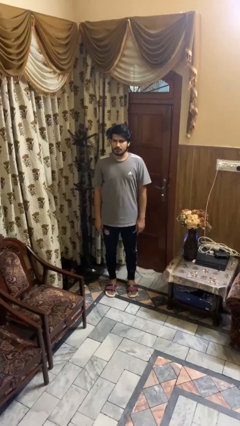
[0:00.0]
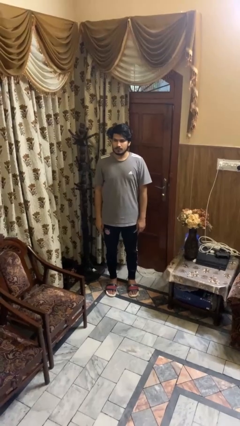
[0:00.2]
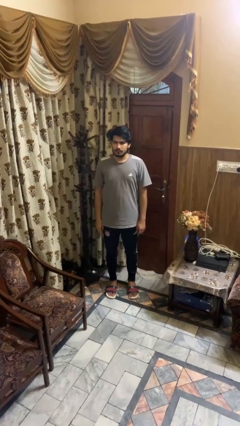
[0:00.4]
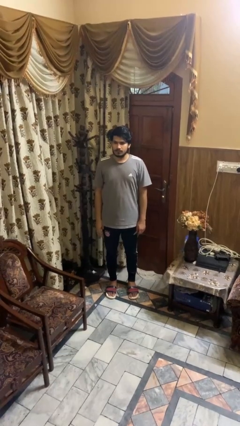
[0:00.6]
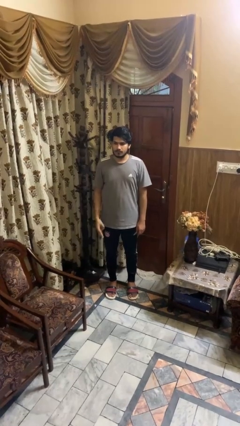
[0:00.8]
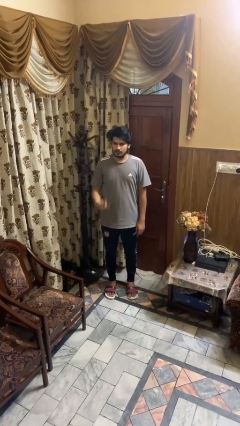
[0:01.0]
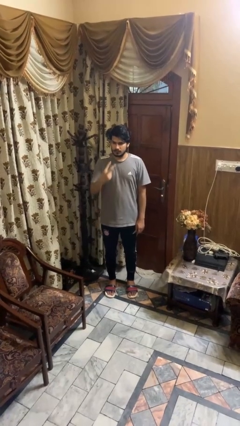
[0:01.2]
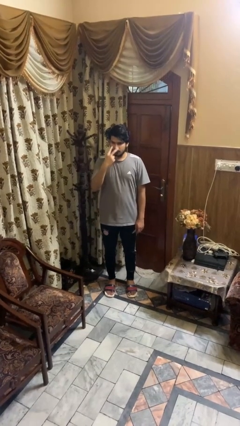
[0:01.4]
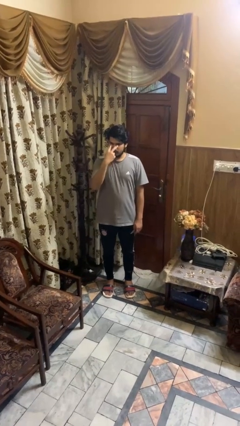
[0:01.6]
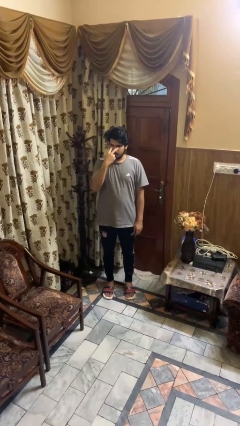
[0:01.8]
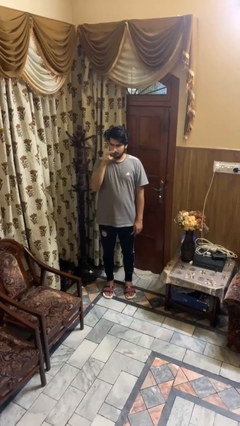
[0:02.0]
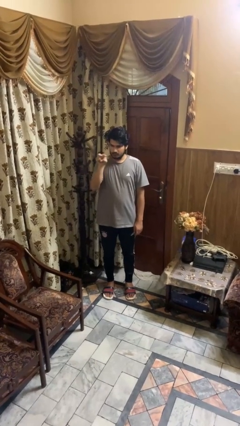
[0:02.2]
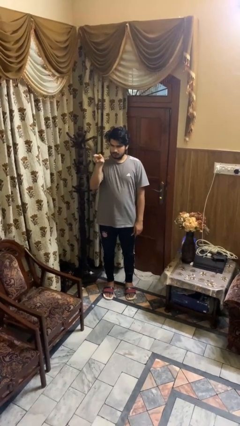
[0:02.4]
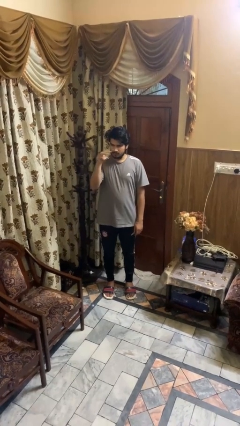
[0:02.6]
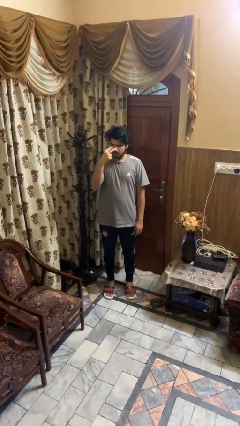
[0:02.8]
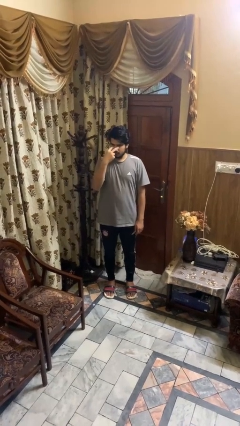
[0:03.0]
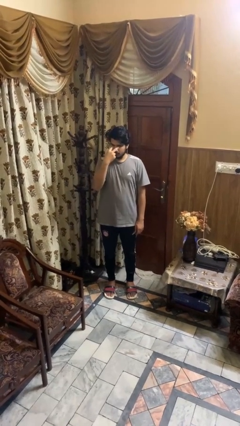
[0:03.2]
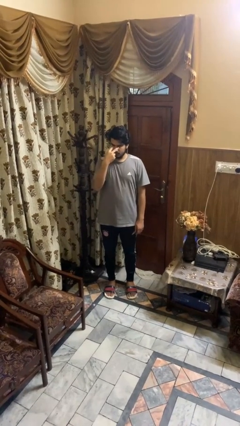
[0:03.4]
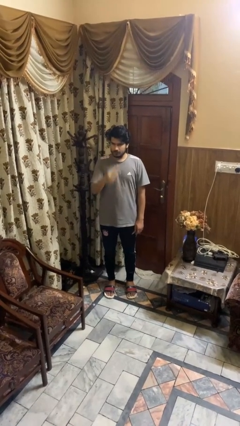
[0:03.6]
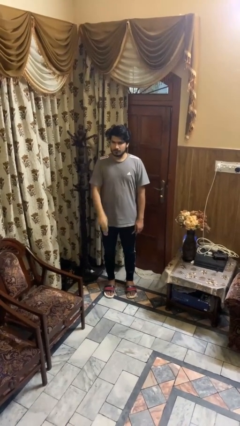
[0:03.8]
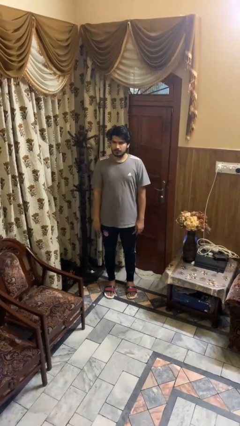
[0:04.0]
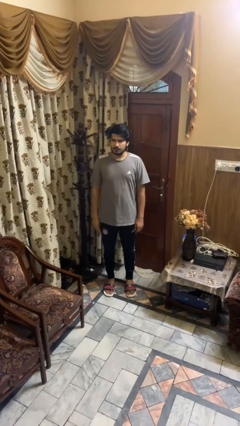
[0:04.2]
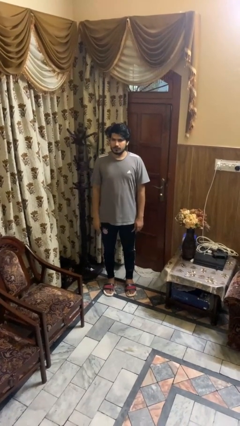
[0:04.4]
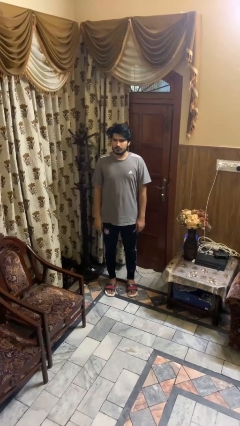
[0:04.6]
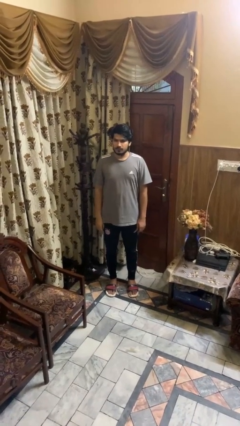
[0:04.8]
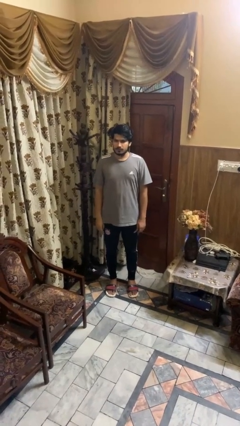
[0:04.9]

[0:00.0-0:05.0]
person gestures watch closely

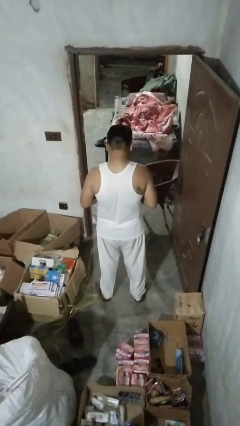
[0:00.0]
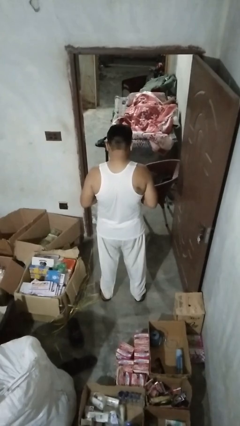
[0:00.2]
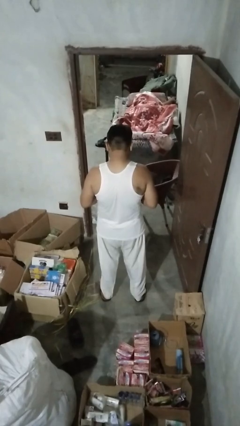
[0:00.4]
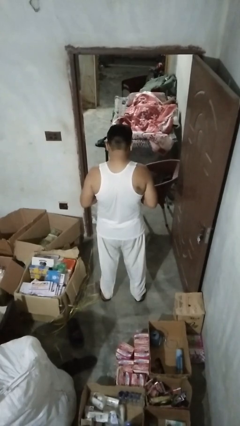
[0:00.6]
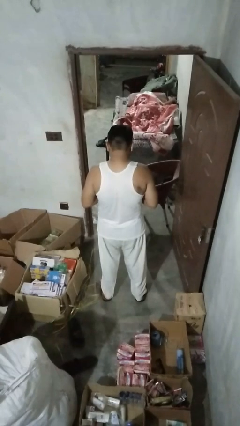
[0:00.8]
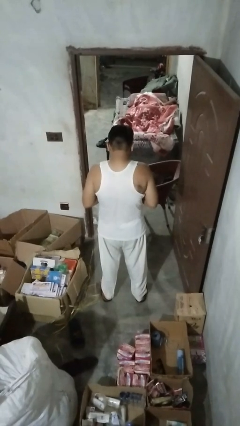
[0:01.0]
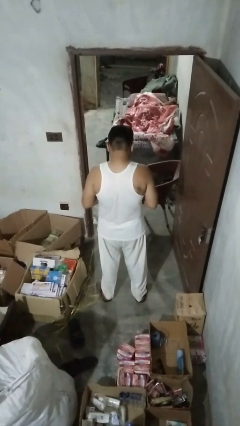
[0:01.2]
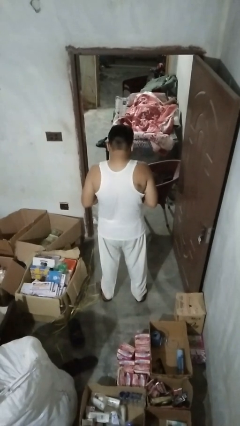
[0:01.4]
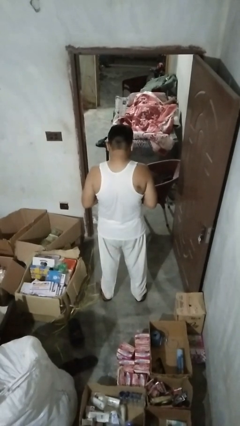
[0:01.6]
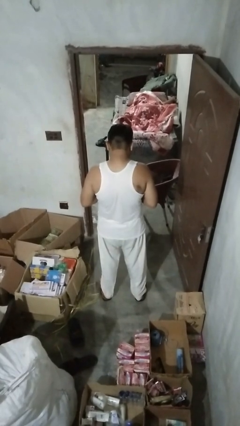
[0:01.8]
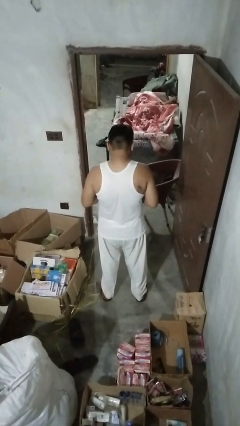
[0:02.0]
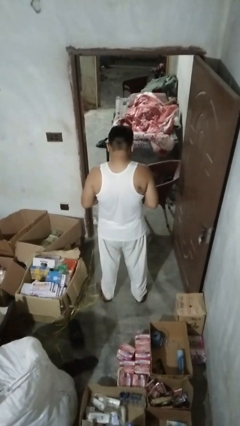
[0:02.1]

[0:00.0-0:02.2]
person shrugs

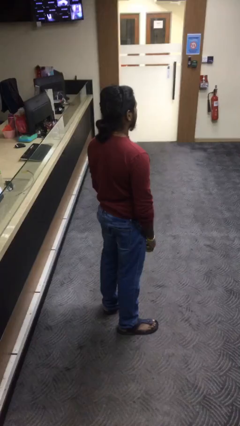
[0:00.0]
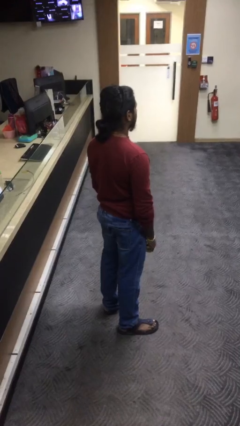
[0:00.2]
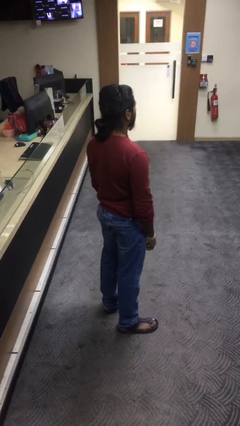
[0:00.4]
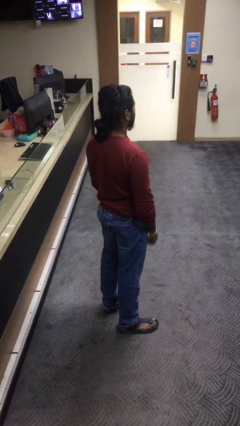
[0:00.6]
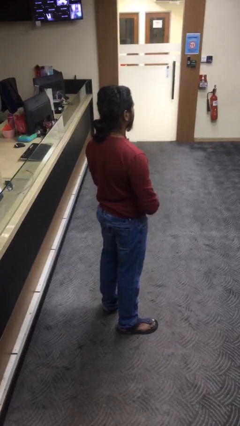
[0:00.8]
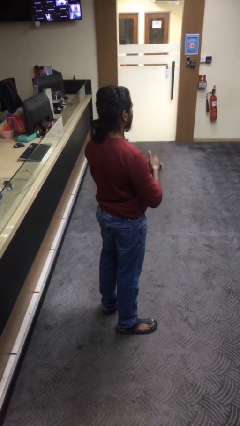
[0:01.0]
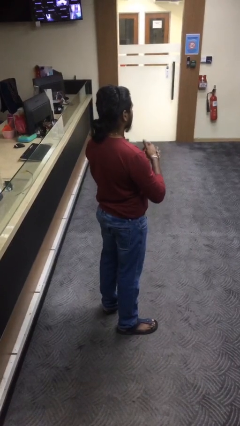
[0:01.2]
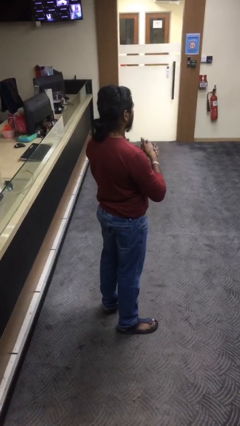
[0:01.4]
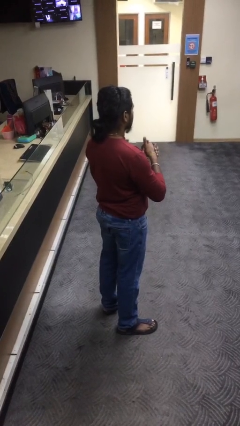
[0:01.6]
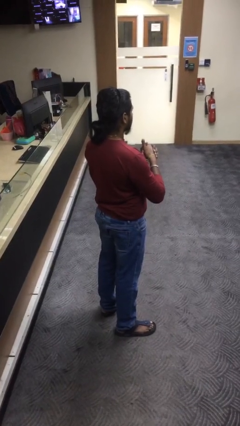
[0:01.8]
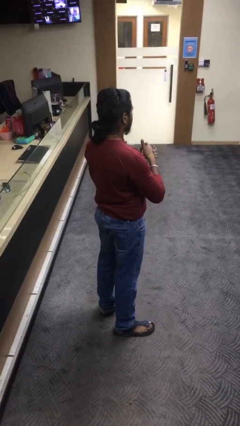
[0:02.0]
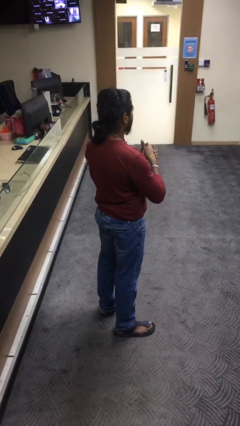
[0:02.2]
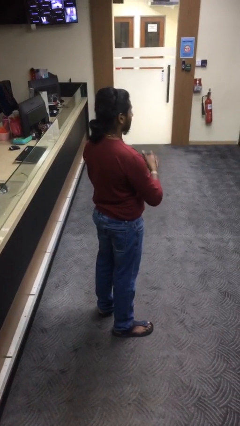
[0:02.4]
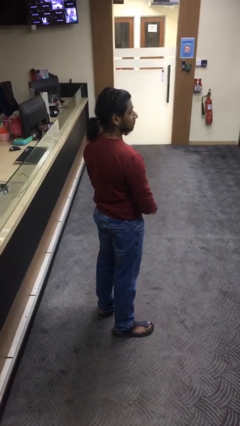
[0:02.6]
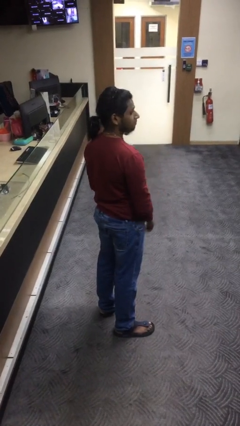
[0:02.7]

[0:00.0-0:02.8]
person cracks knuckles

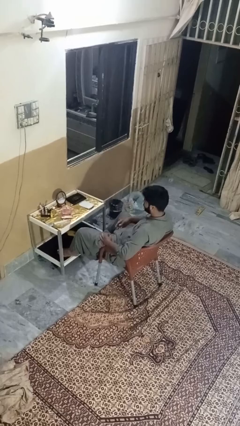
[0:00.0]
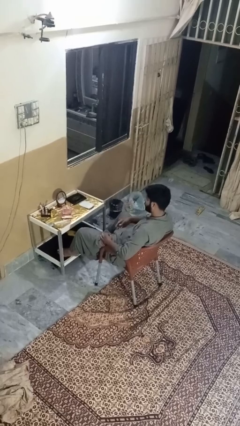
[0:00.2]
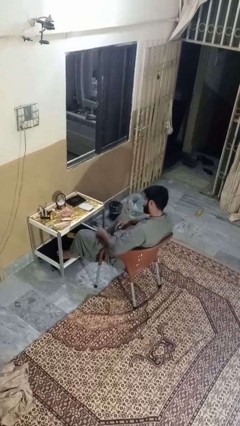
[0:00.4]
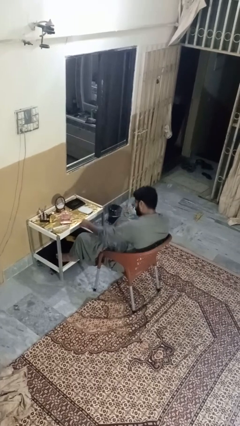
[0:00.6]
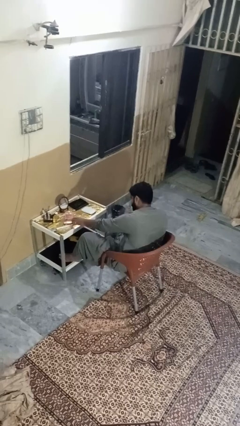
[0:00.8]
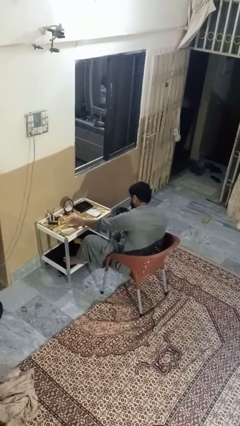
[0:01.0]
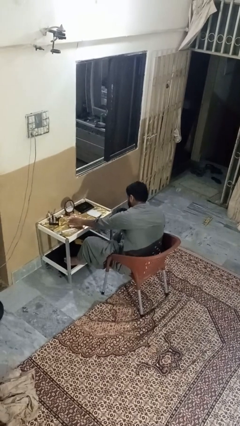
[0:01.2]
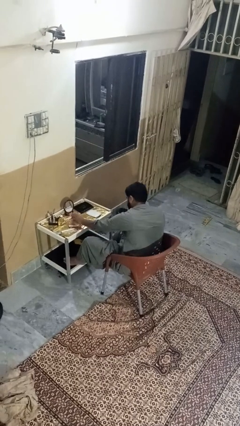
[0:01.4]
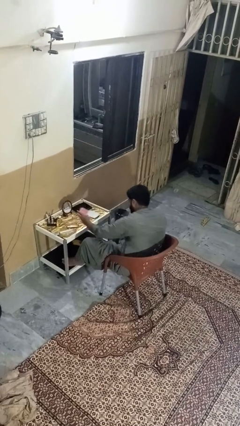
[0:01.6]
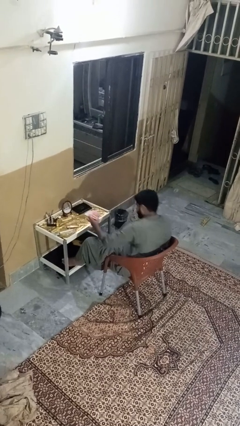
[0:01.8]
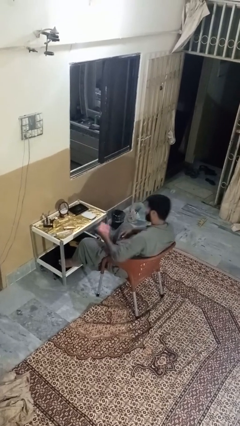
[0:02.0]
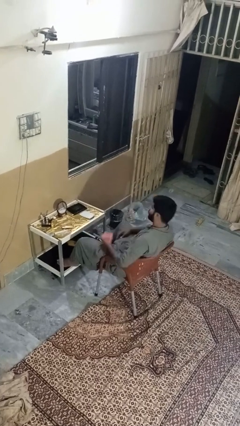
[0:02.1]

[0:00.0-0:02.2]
person picks up object from table

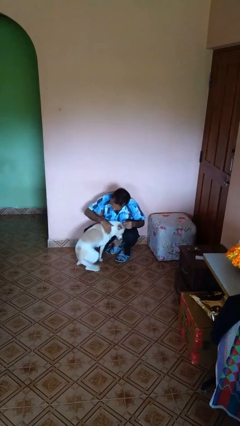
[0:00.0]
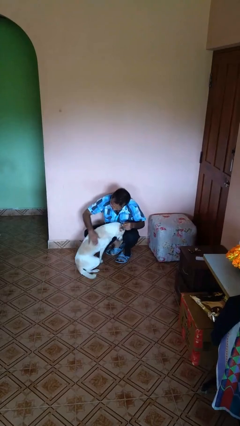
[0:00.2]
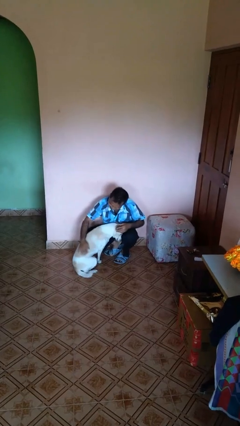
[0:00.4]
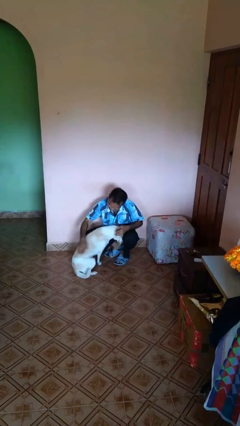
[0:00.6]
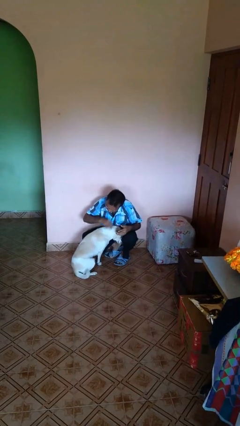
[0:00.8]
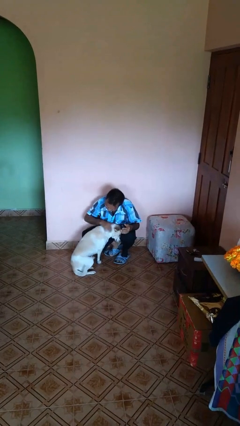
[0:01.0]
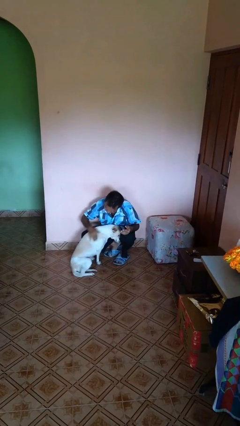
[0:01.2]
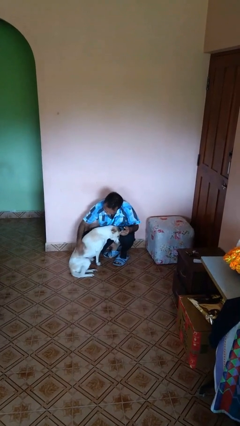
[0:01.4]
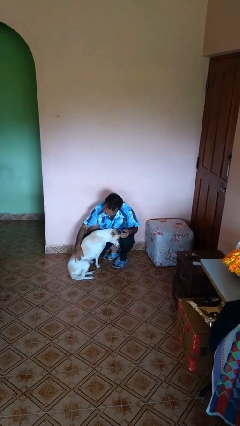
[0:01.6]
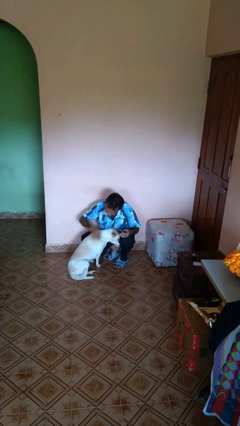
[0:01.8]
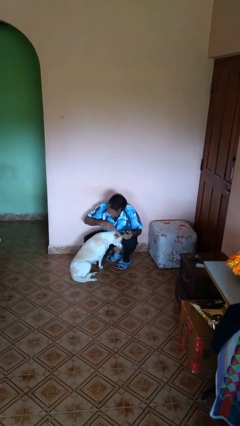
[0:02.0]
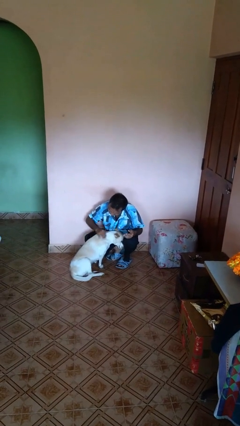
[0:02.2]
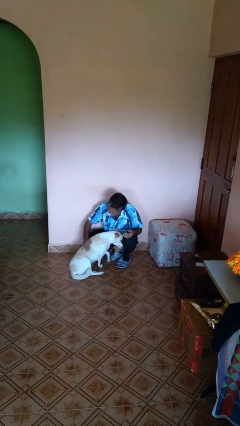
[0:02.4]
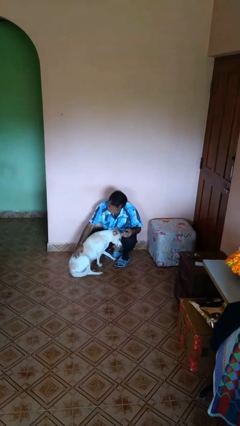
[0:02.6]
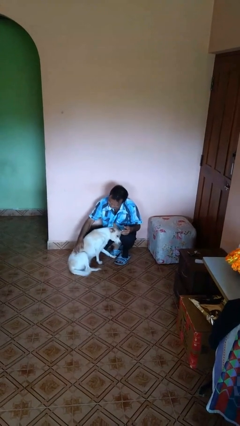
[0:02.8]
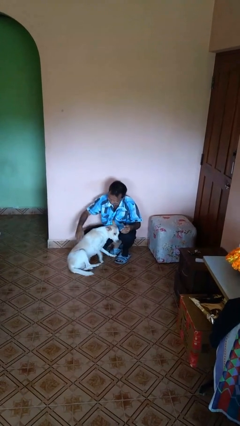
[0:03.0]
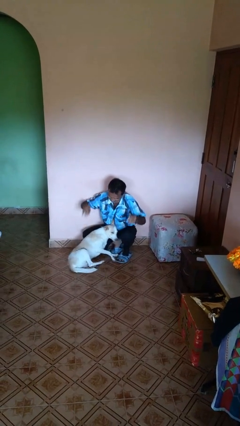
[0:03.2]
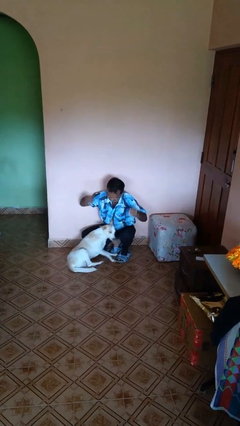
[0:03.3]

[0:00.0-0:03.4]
person pets dog

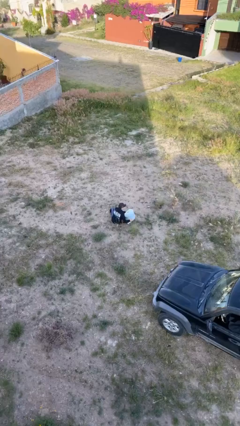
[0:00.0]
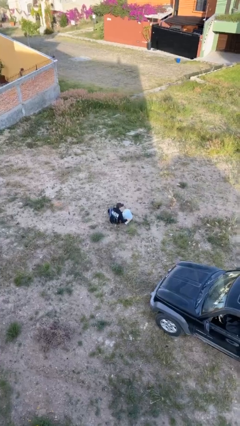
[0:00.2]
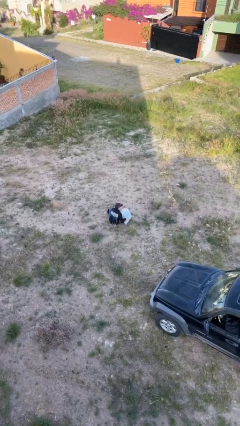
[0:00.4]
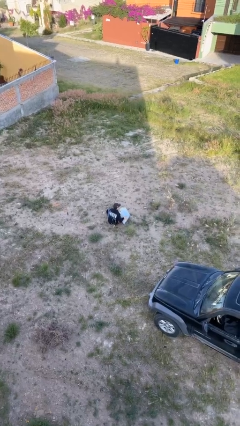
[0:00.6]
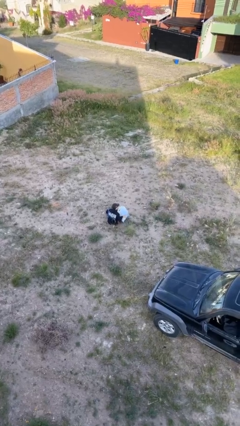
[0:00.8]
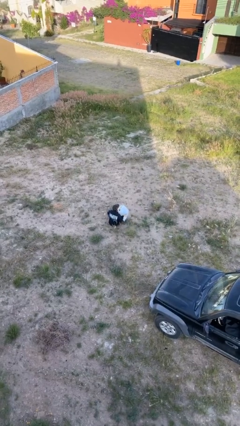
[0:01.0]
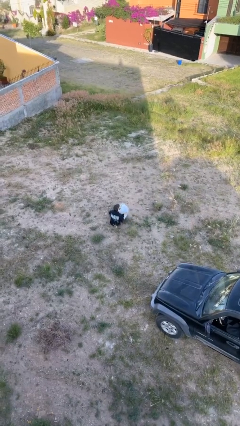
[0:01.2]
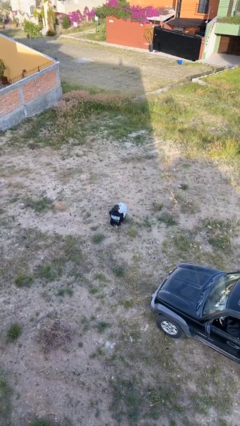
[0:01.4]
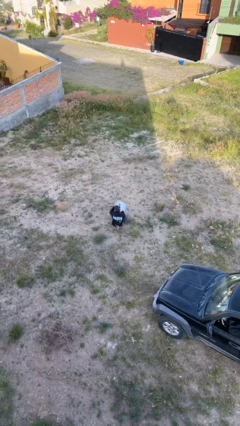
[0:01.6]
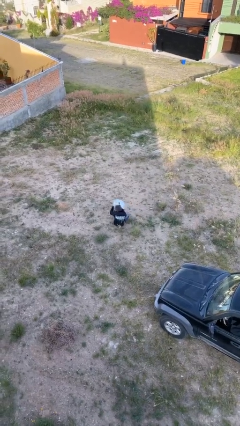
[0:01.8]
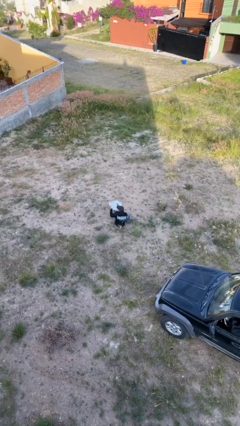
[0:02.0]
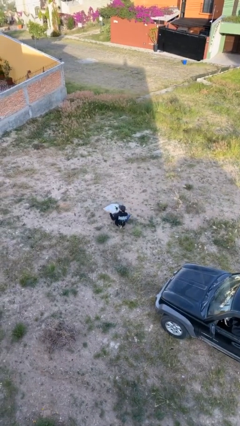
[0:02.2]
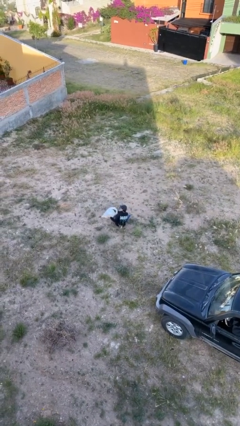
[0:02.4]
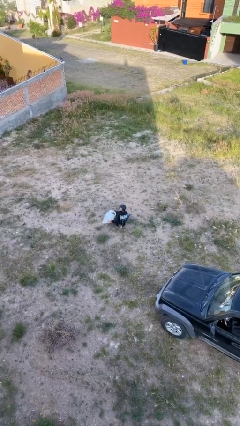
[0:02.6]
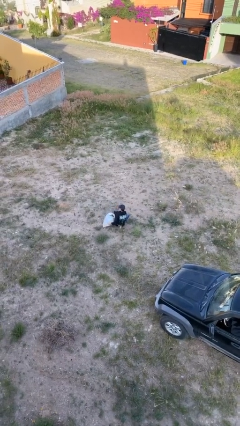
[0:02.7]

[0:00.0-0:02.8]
person picks up object from floor
